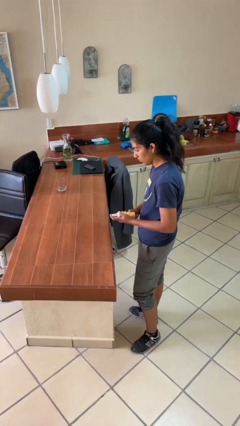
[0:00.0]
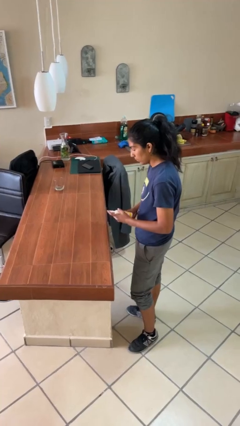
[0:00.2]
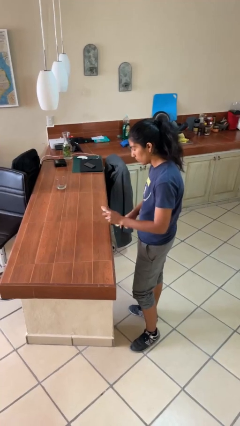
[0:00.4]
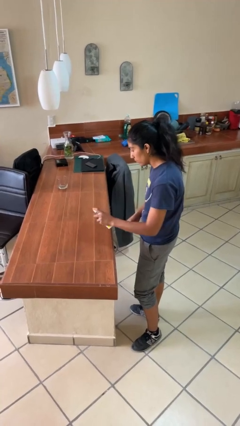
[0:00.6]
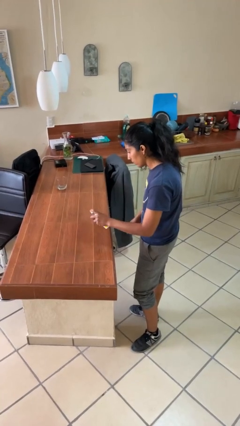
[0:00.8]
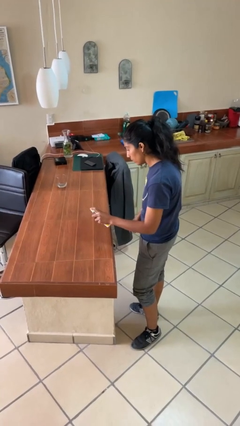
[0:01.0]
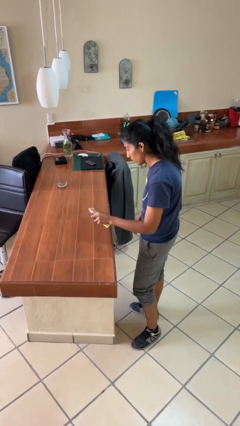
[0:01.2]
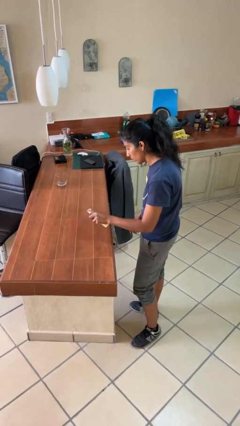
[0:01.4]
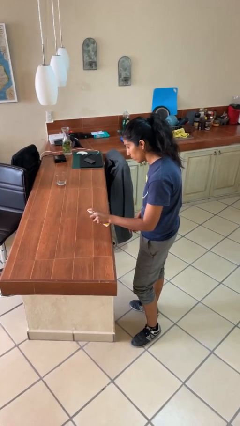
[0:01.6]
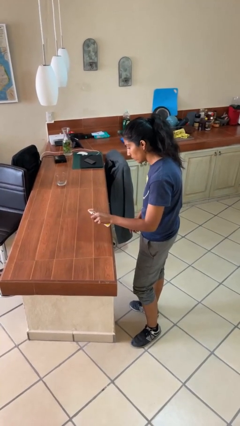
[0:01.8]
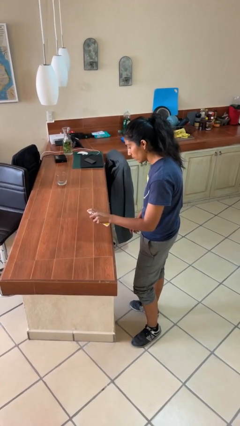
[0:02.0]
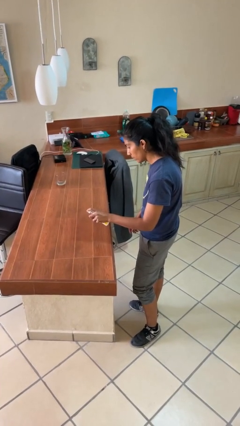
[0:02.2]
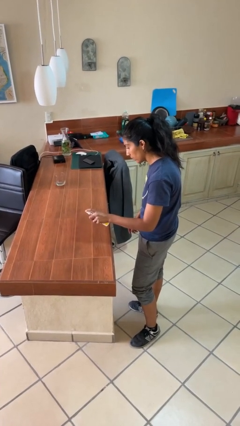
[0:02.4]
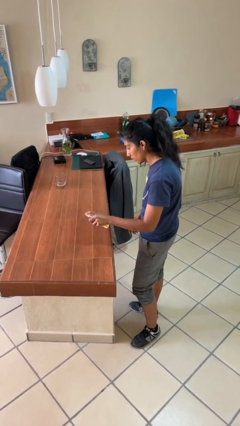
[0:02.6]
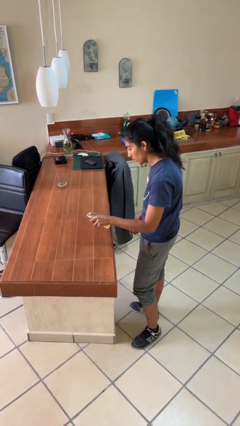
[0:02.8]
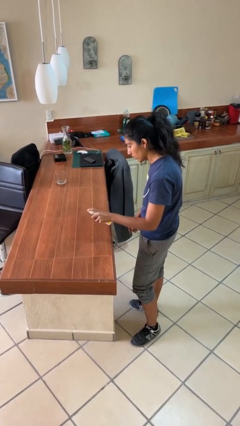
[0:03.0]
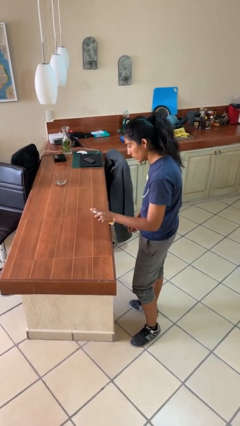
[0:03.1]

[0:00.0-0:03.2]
person sprays from bottle

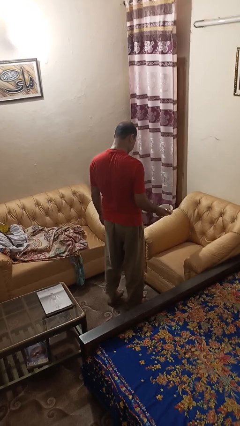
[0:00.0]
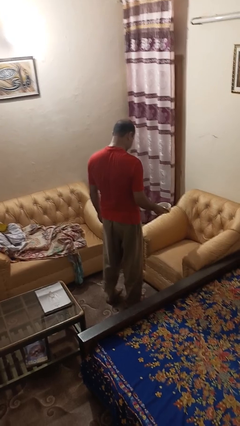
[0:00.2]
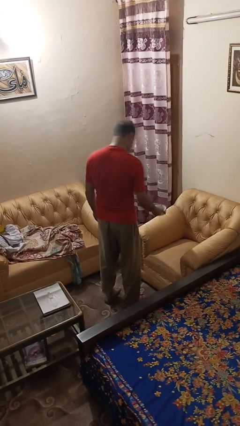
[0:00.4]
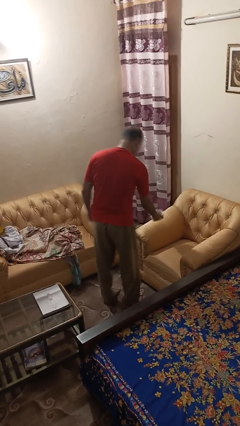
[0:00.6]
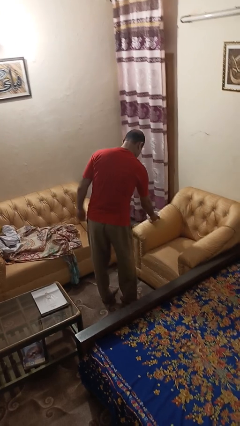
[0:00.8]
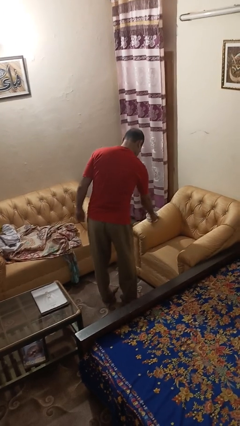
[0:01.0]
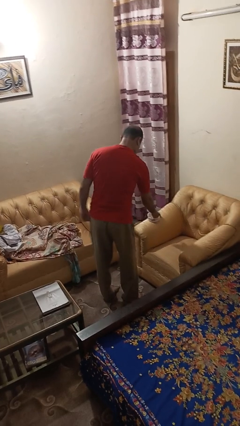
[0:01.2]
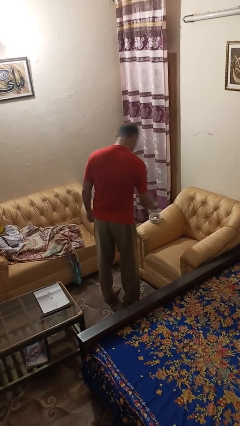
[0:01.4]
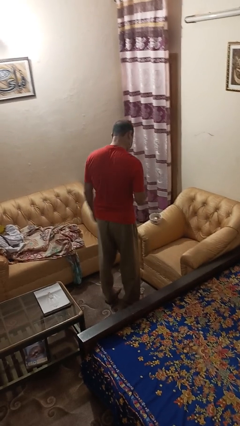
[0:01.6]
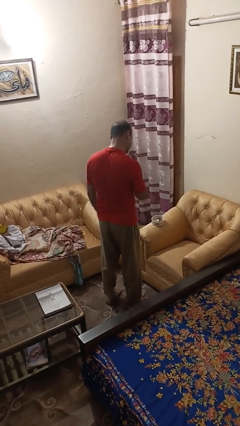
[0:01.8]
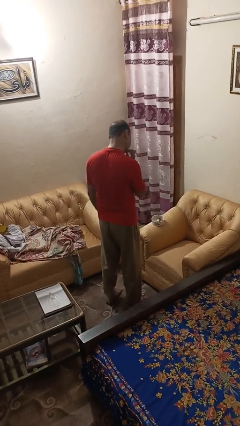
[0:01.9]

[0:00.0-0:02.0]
person puts down object on couch

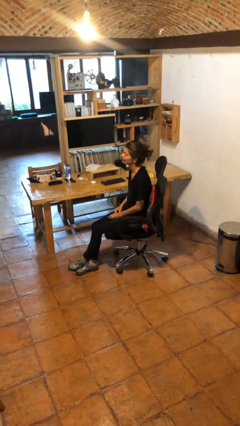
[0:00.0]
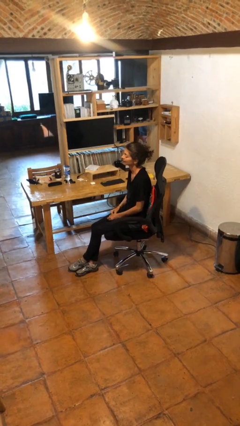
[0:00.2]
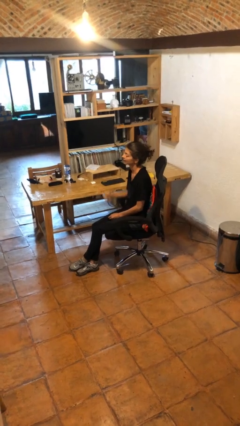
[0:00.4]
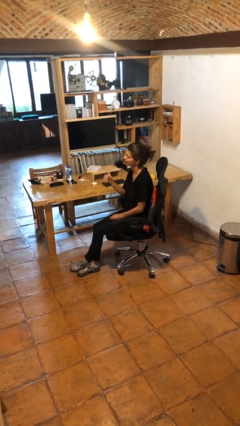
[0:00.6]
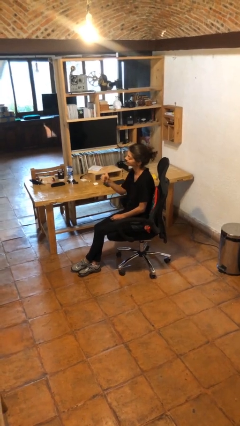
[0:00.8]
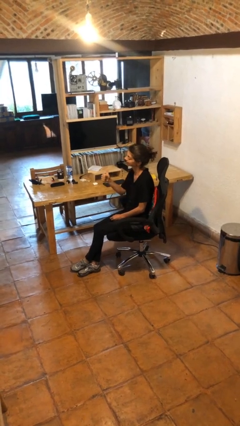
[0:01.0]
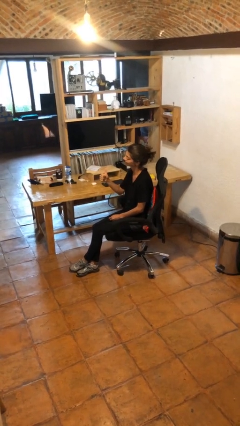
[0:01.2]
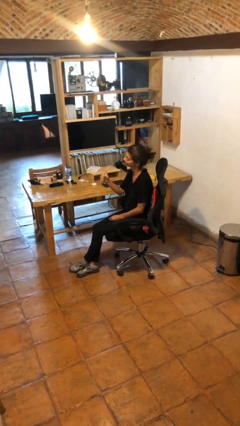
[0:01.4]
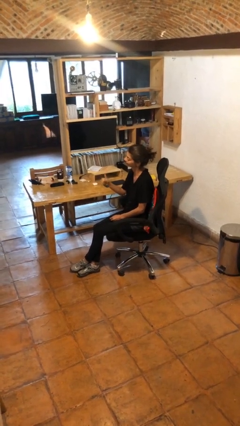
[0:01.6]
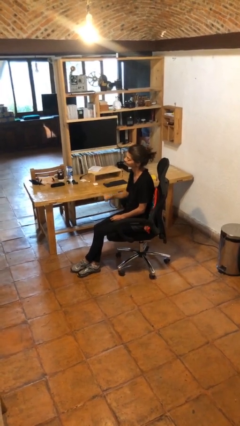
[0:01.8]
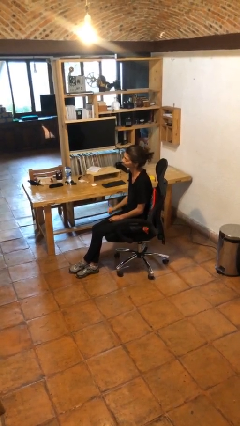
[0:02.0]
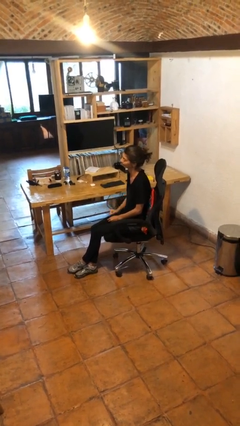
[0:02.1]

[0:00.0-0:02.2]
person gestures thumbs up

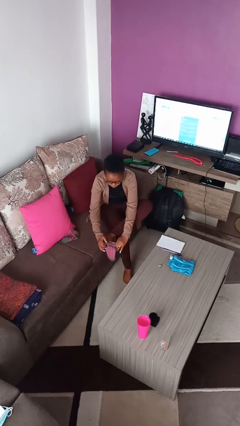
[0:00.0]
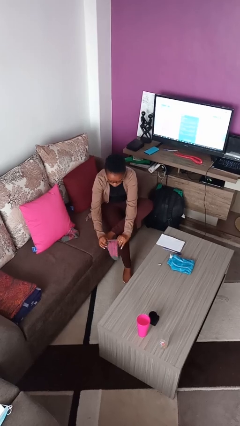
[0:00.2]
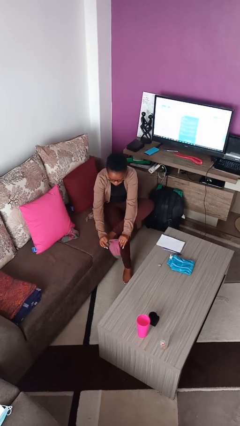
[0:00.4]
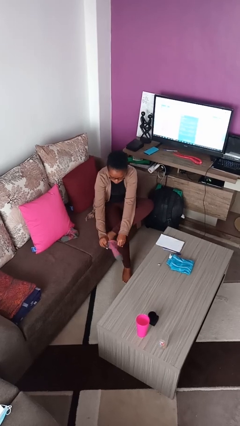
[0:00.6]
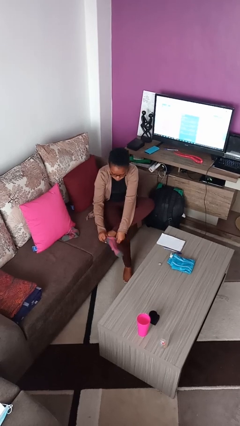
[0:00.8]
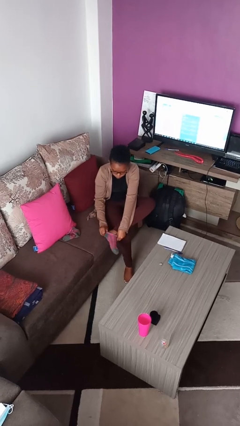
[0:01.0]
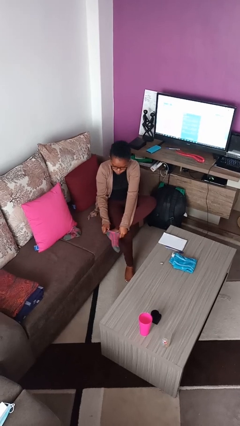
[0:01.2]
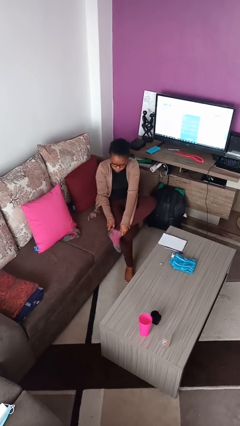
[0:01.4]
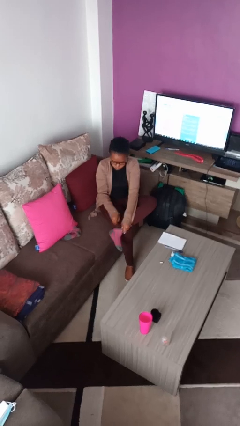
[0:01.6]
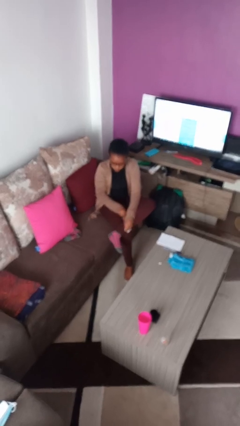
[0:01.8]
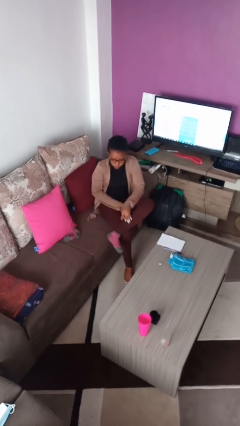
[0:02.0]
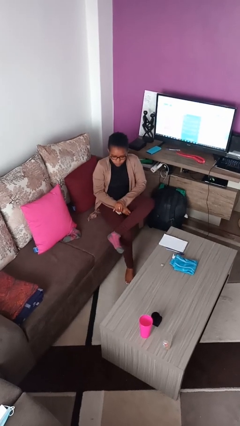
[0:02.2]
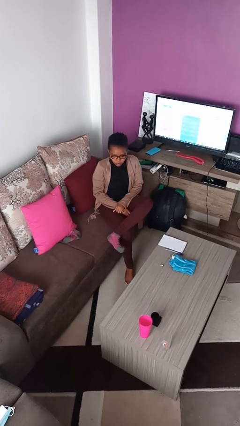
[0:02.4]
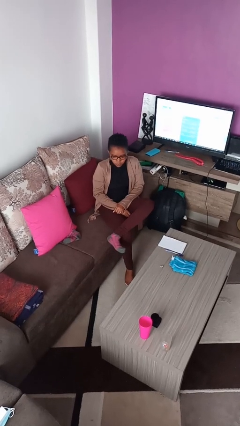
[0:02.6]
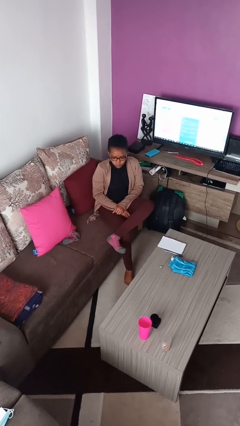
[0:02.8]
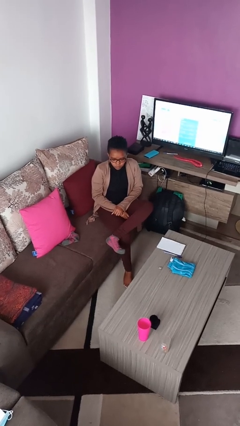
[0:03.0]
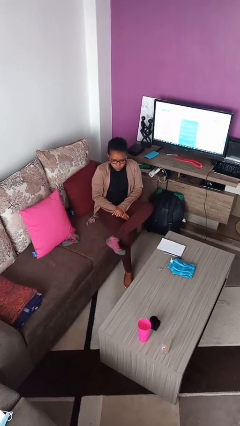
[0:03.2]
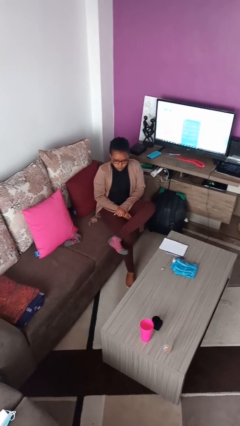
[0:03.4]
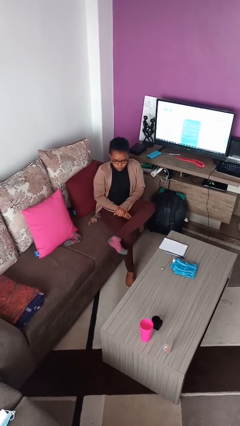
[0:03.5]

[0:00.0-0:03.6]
person puts on socks

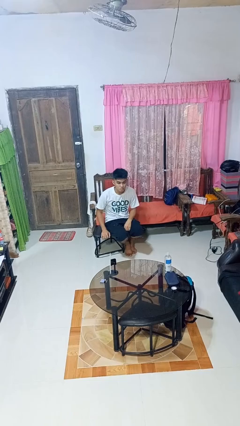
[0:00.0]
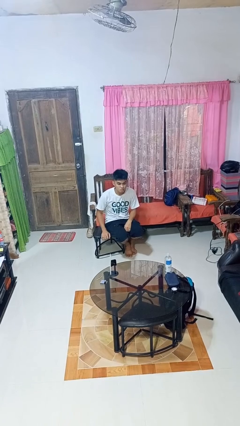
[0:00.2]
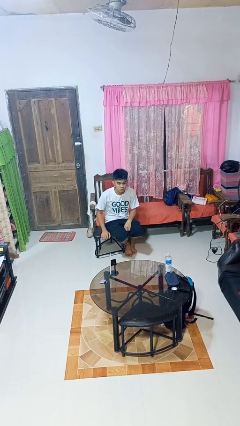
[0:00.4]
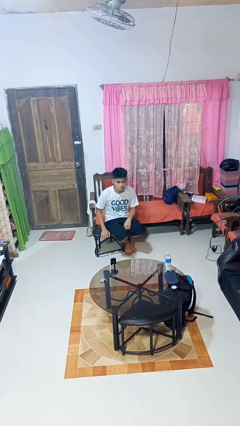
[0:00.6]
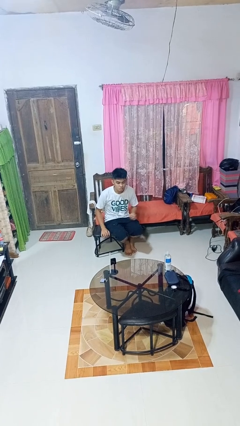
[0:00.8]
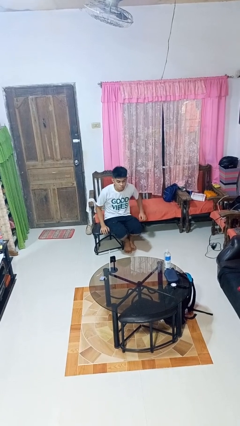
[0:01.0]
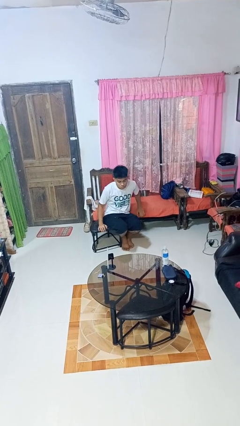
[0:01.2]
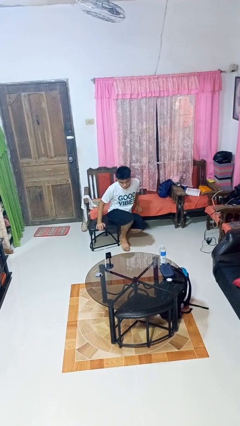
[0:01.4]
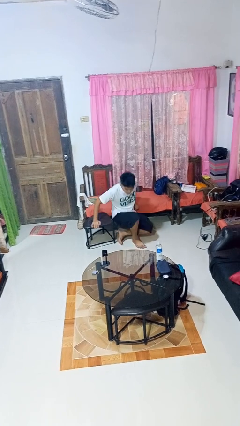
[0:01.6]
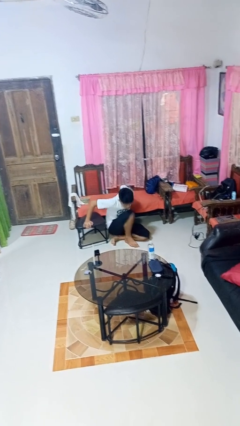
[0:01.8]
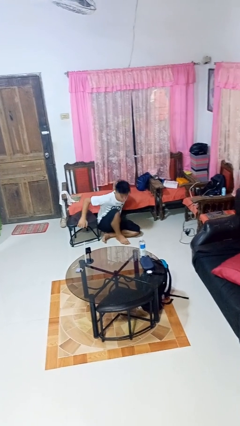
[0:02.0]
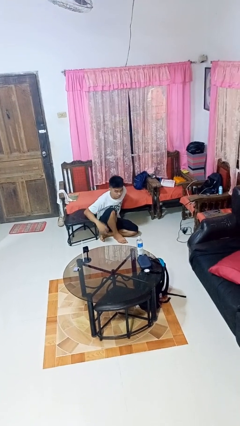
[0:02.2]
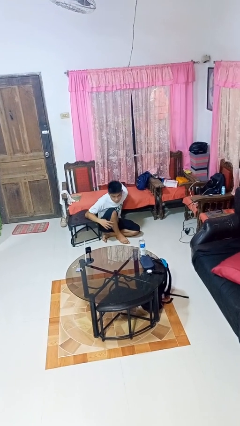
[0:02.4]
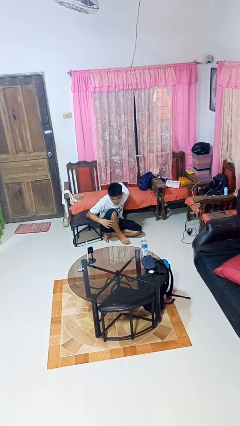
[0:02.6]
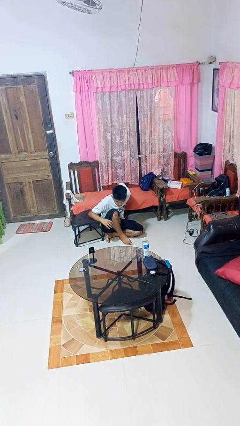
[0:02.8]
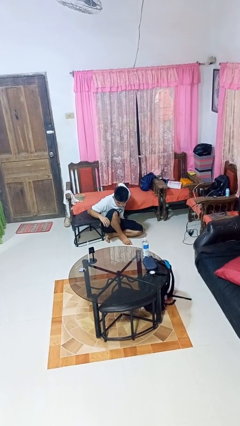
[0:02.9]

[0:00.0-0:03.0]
person falls from chair

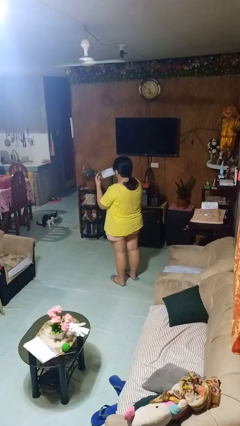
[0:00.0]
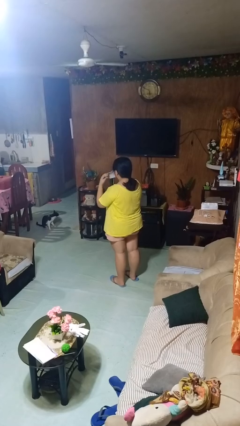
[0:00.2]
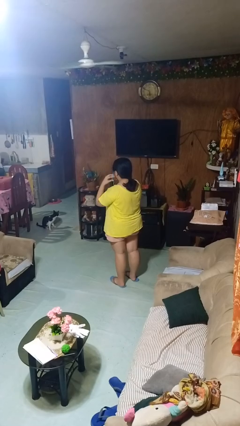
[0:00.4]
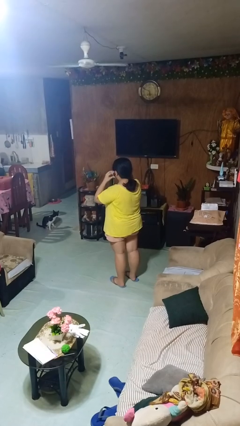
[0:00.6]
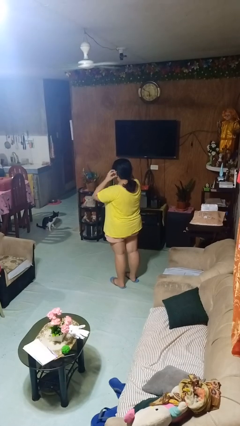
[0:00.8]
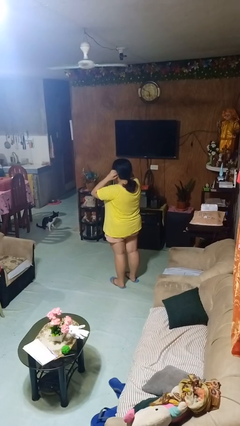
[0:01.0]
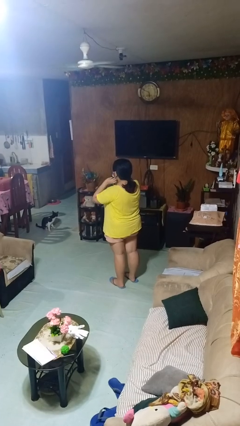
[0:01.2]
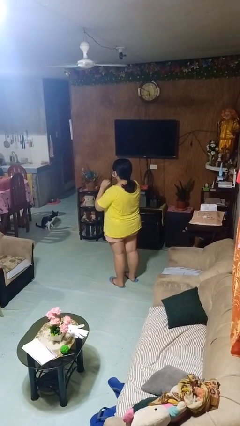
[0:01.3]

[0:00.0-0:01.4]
person puts on facemask

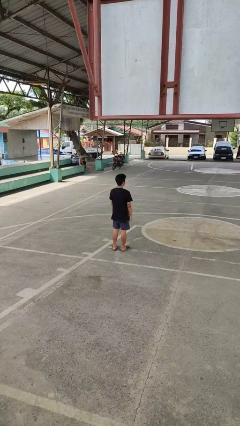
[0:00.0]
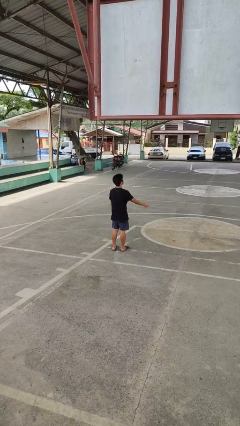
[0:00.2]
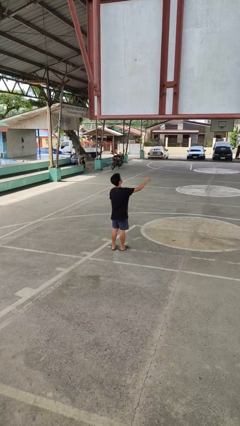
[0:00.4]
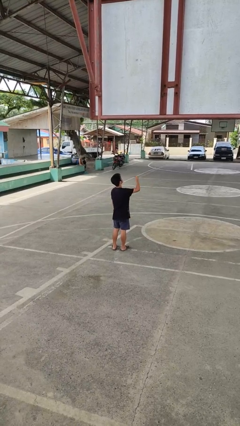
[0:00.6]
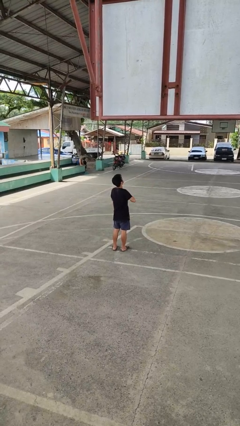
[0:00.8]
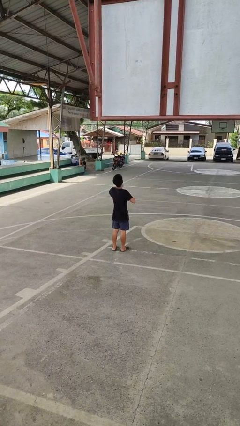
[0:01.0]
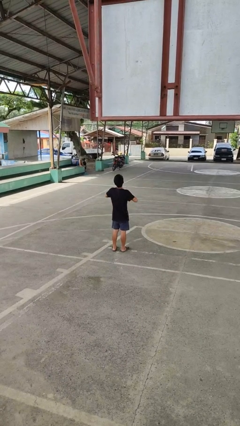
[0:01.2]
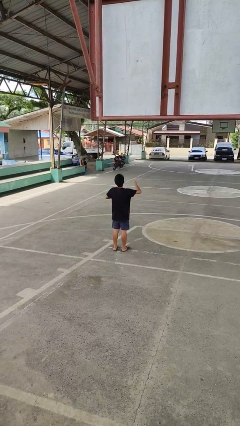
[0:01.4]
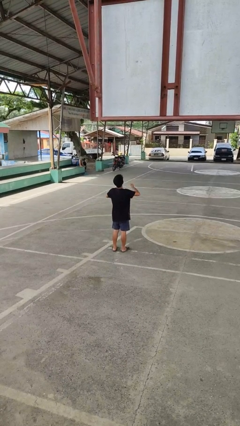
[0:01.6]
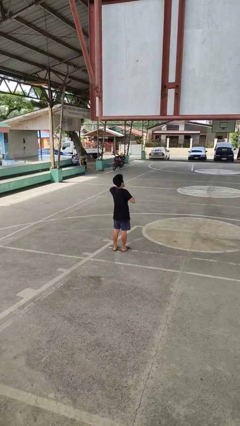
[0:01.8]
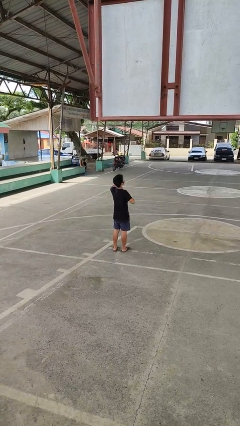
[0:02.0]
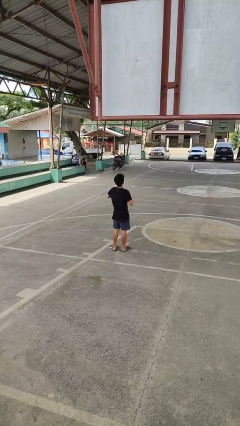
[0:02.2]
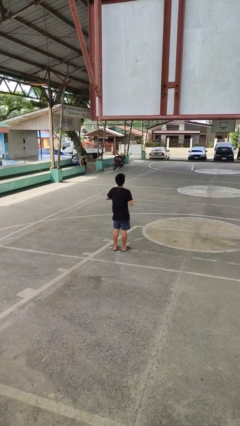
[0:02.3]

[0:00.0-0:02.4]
person drums on chest
